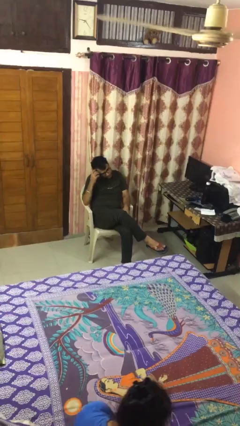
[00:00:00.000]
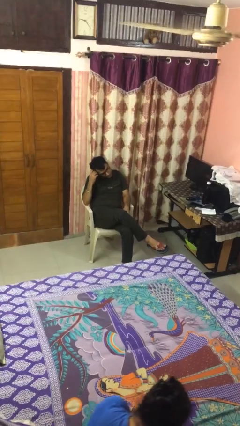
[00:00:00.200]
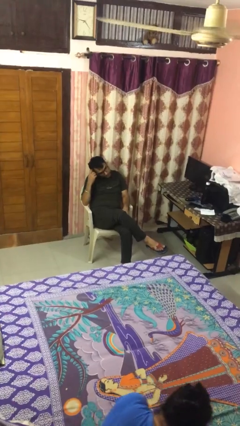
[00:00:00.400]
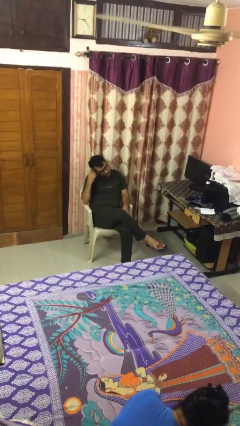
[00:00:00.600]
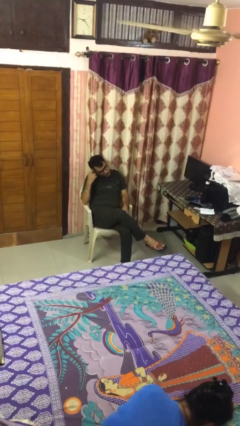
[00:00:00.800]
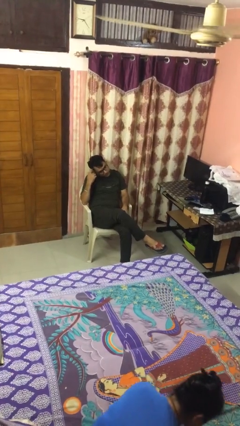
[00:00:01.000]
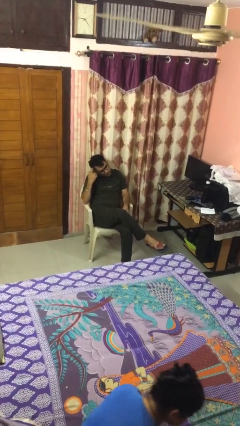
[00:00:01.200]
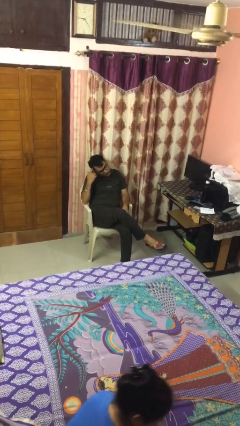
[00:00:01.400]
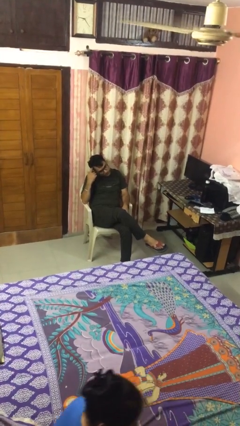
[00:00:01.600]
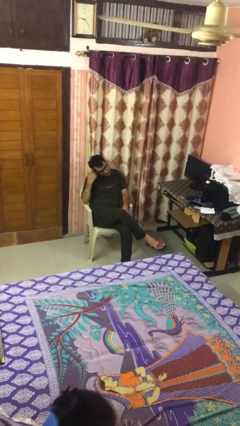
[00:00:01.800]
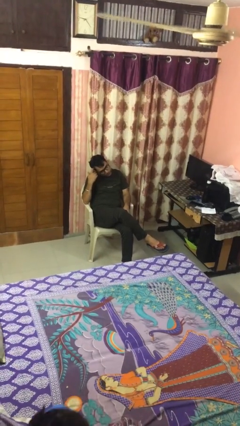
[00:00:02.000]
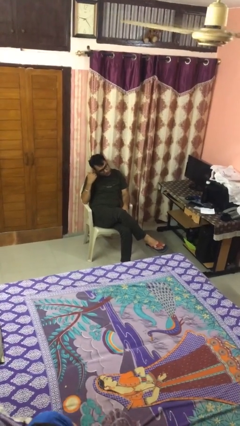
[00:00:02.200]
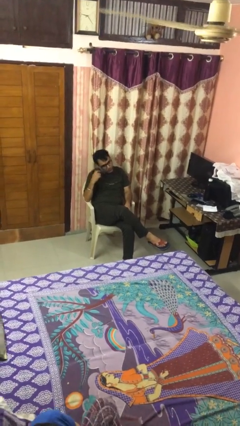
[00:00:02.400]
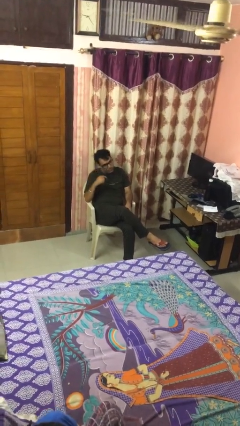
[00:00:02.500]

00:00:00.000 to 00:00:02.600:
person scratches face

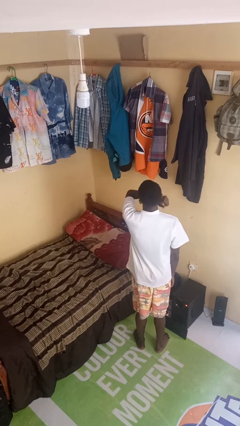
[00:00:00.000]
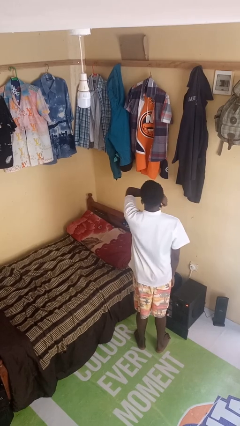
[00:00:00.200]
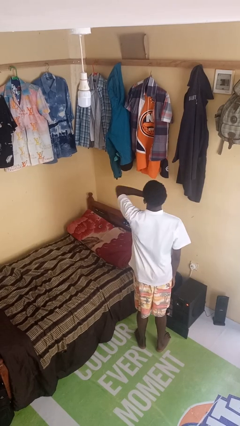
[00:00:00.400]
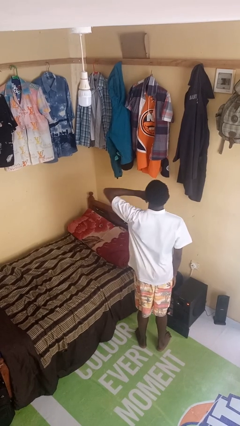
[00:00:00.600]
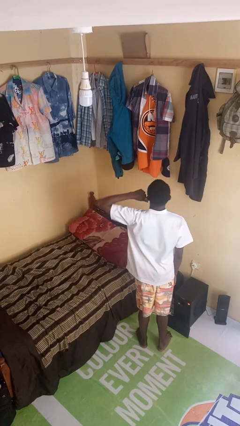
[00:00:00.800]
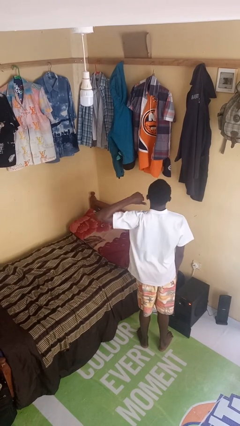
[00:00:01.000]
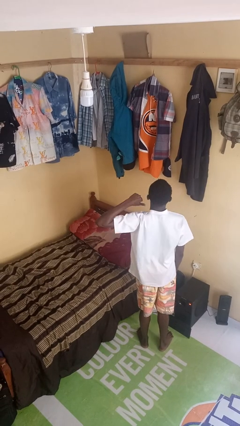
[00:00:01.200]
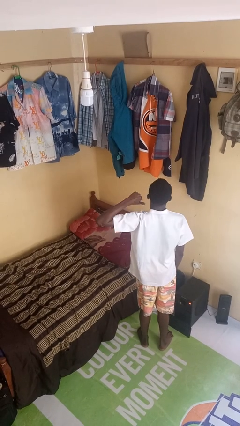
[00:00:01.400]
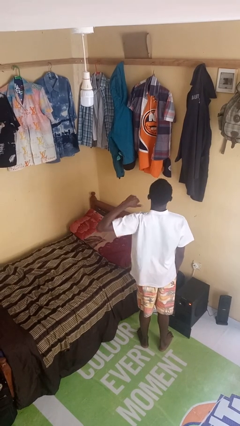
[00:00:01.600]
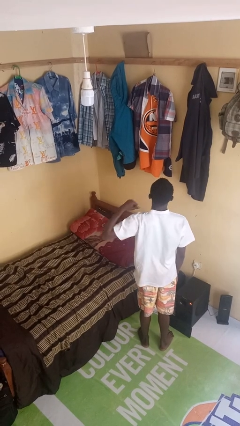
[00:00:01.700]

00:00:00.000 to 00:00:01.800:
person gestures cut

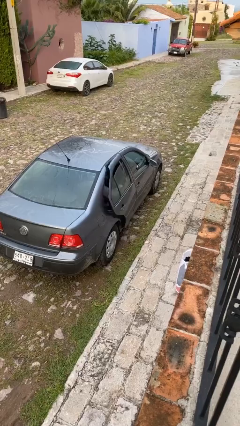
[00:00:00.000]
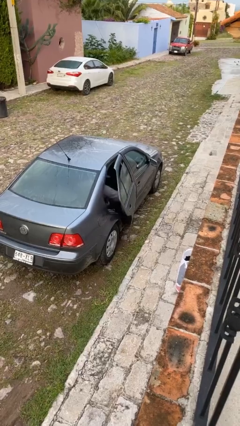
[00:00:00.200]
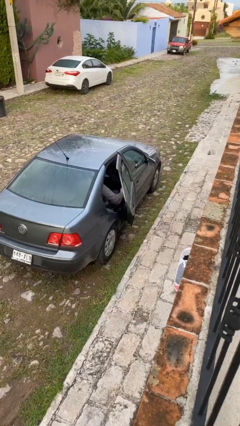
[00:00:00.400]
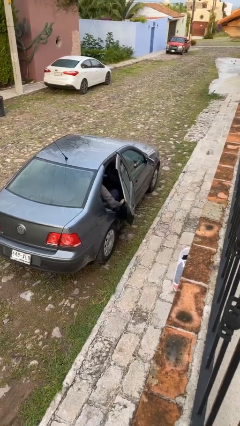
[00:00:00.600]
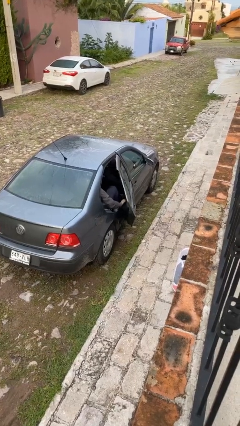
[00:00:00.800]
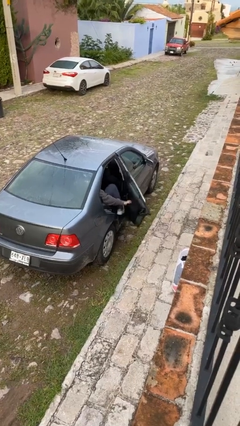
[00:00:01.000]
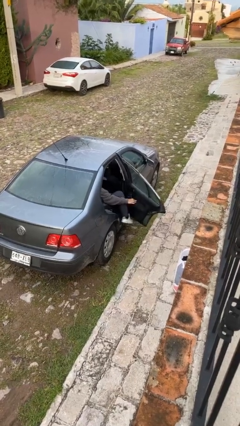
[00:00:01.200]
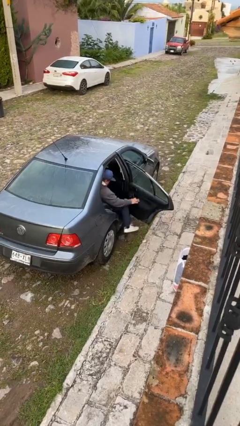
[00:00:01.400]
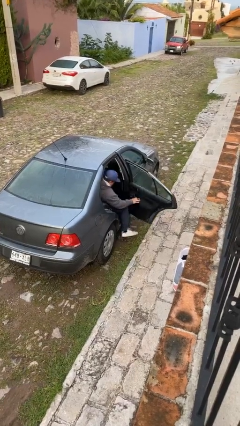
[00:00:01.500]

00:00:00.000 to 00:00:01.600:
person opens car door

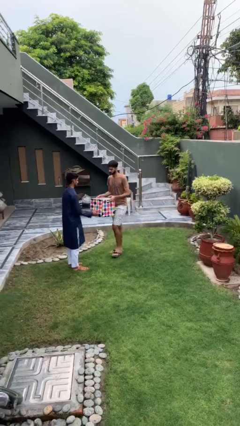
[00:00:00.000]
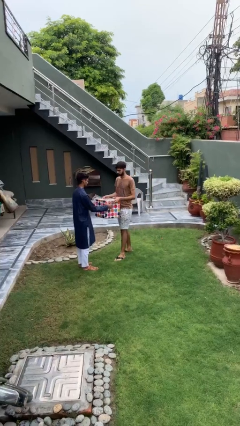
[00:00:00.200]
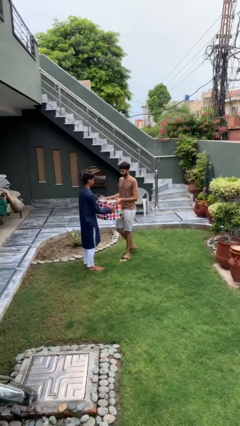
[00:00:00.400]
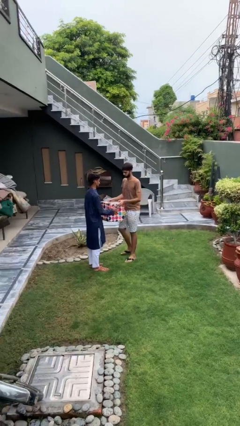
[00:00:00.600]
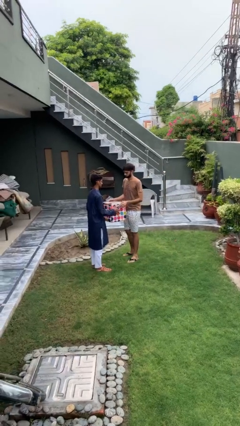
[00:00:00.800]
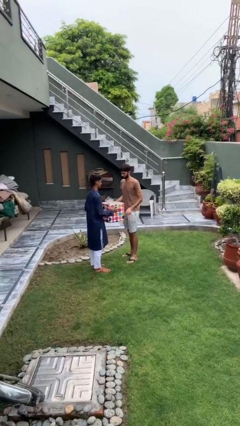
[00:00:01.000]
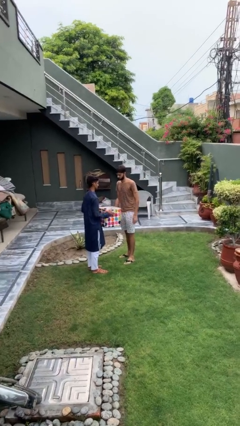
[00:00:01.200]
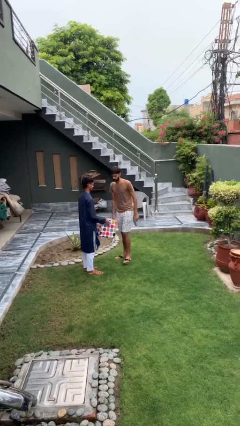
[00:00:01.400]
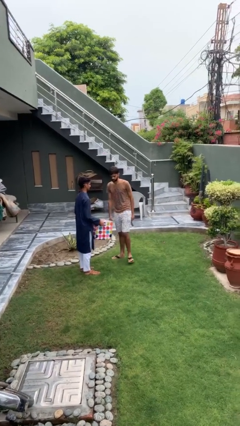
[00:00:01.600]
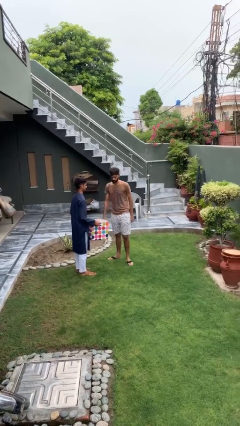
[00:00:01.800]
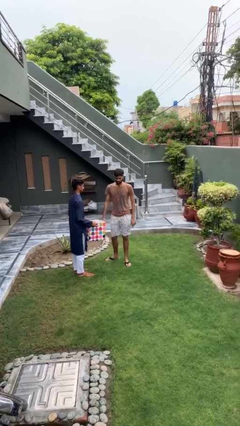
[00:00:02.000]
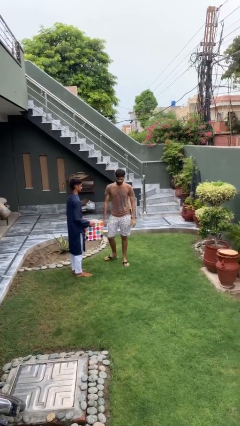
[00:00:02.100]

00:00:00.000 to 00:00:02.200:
person transfers object to person

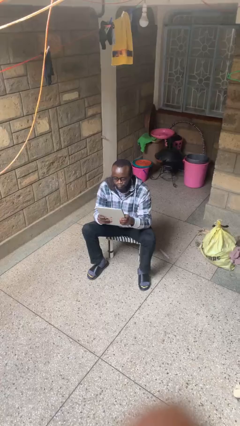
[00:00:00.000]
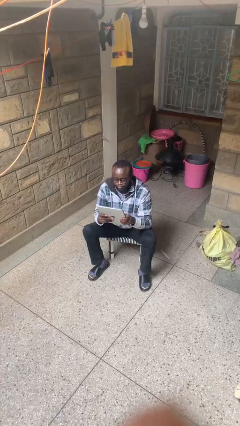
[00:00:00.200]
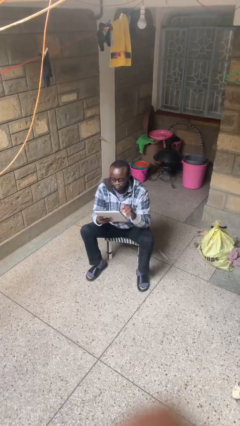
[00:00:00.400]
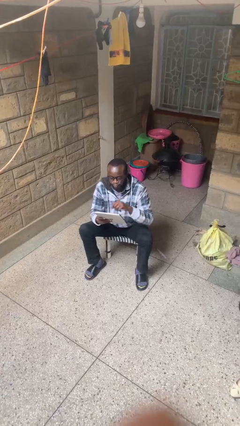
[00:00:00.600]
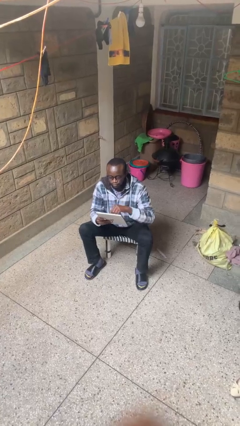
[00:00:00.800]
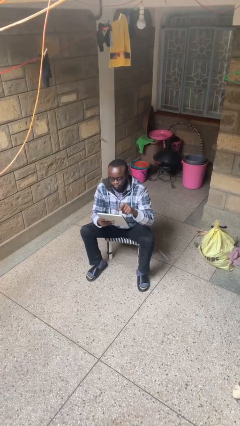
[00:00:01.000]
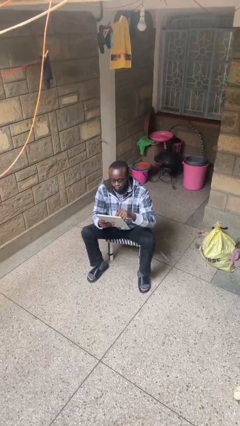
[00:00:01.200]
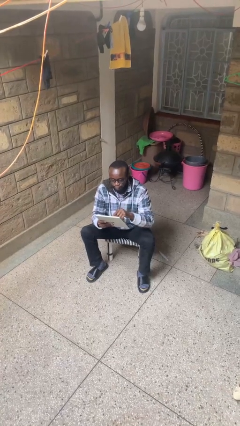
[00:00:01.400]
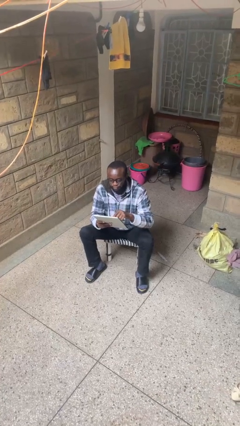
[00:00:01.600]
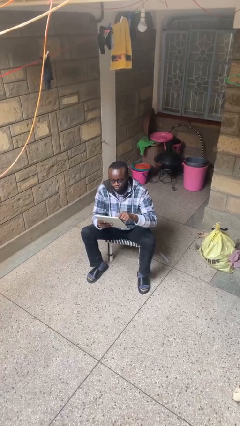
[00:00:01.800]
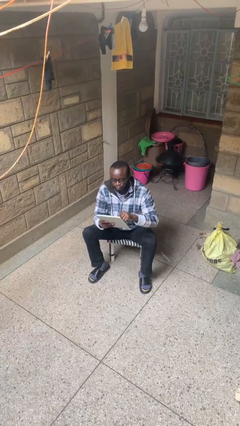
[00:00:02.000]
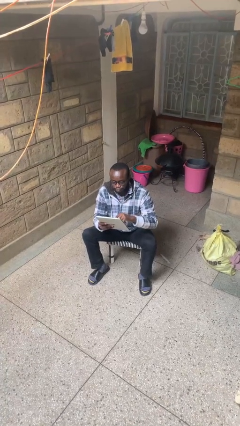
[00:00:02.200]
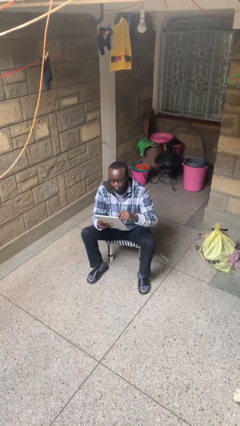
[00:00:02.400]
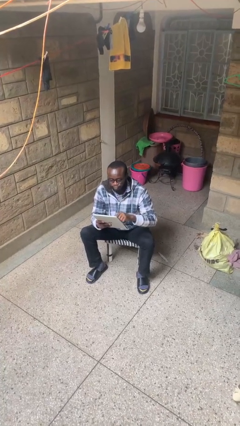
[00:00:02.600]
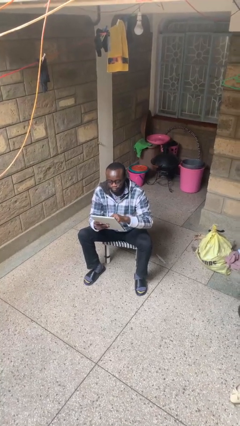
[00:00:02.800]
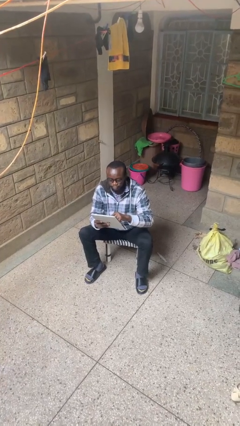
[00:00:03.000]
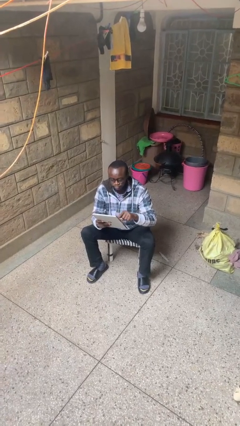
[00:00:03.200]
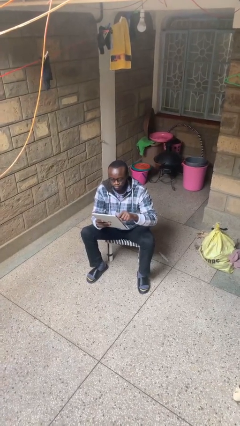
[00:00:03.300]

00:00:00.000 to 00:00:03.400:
person interacts with tablet

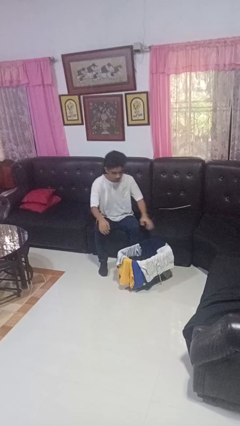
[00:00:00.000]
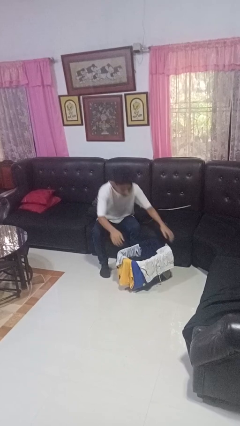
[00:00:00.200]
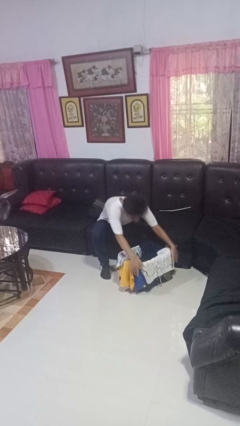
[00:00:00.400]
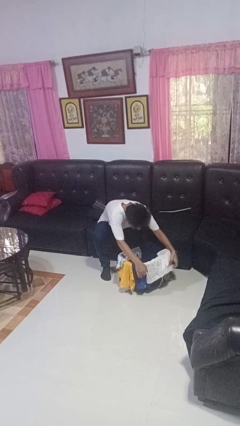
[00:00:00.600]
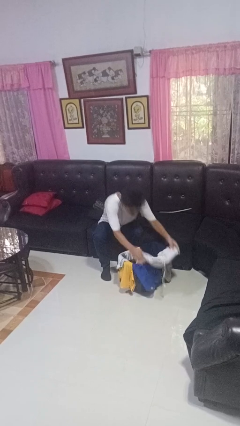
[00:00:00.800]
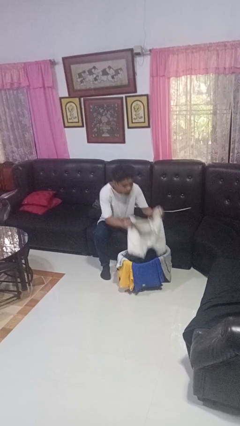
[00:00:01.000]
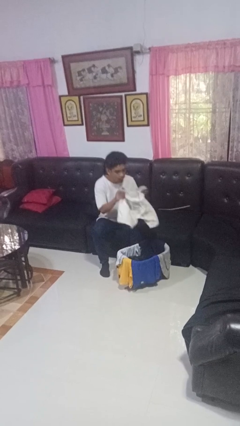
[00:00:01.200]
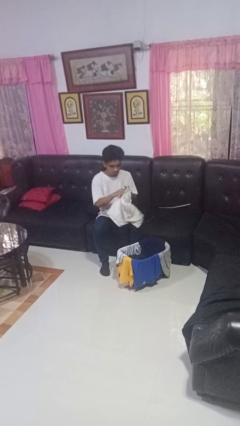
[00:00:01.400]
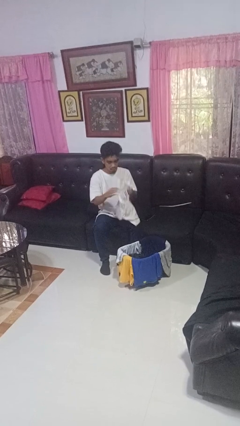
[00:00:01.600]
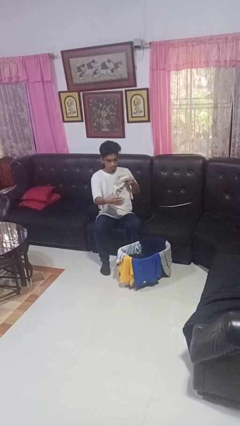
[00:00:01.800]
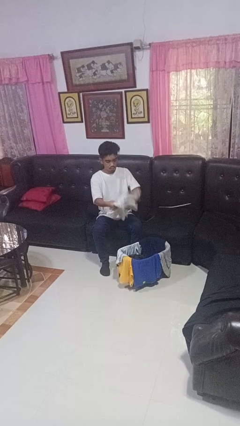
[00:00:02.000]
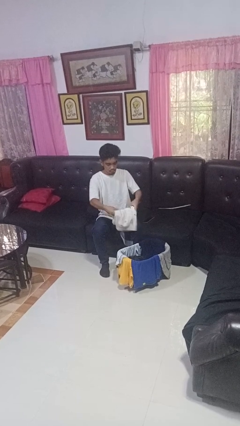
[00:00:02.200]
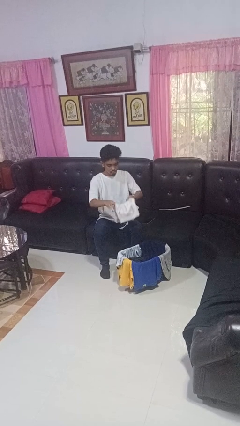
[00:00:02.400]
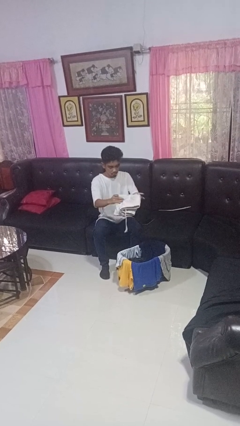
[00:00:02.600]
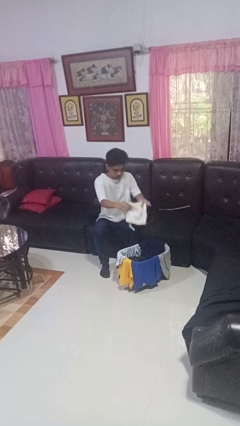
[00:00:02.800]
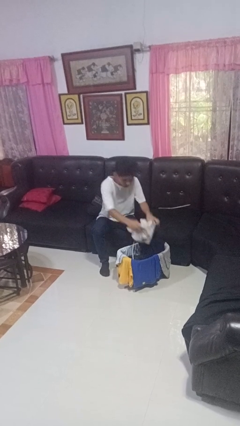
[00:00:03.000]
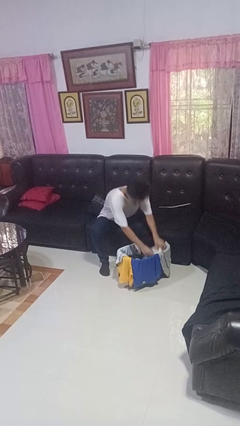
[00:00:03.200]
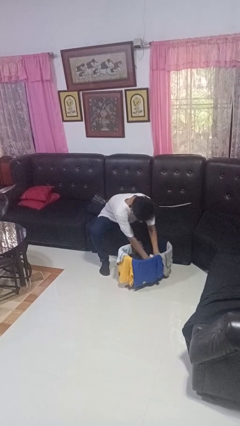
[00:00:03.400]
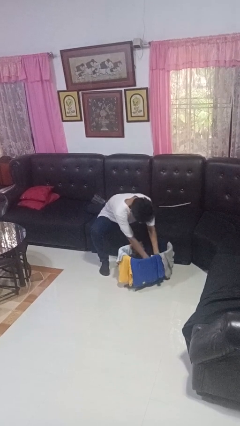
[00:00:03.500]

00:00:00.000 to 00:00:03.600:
person folds pants

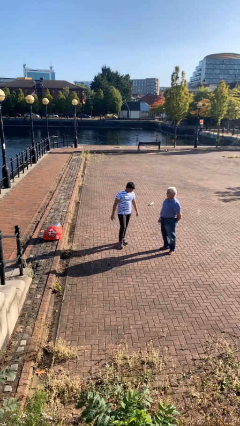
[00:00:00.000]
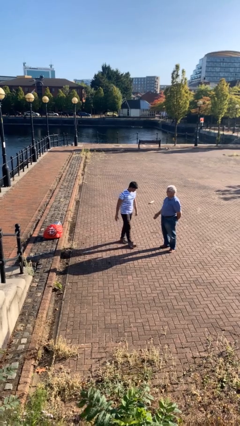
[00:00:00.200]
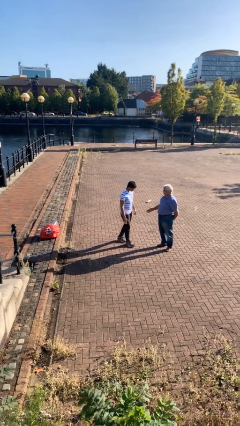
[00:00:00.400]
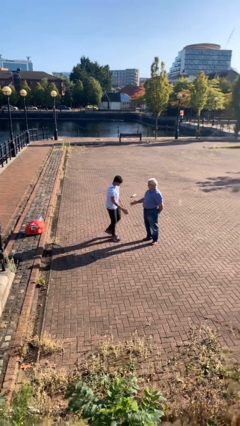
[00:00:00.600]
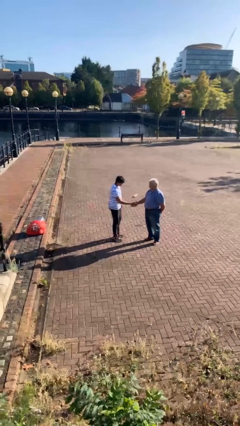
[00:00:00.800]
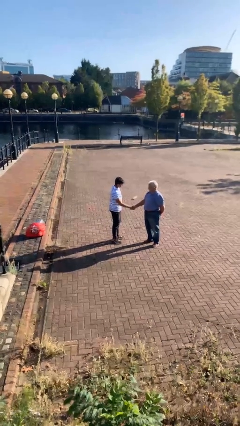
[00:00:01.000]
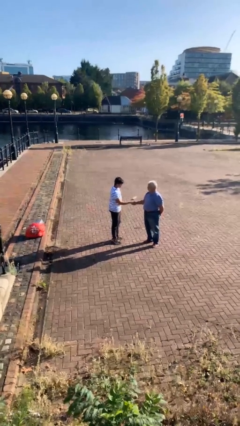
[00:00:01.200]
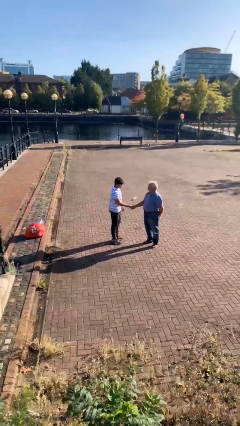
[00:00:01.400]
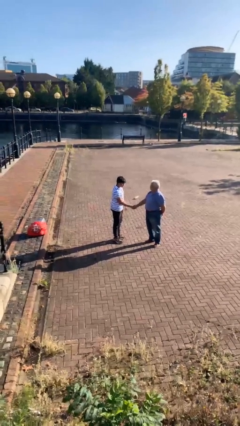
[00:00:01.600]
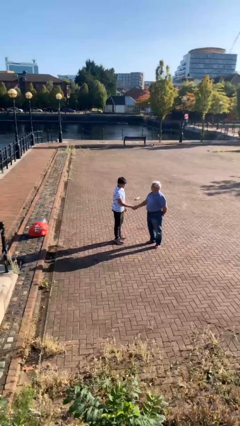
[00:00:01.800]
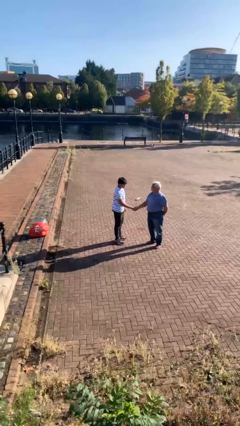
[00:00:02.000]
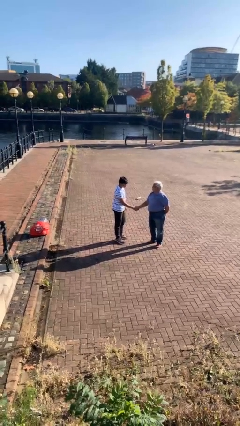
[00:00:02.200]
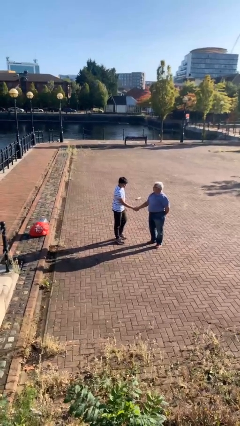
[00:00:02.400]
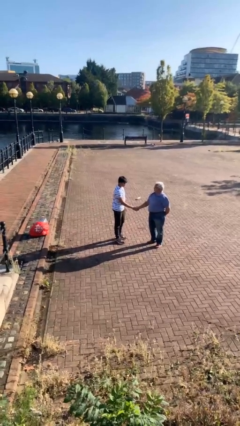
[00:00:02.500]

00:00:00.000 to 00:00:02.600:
person shakes hand
